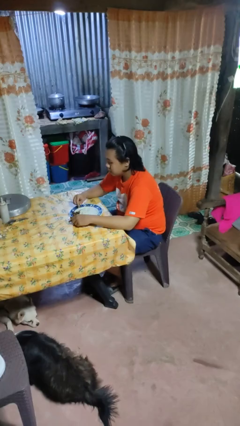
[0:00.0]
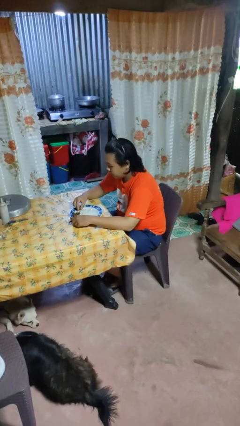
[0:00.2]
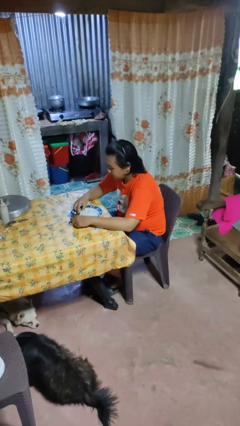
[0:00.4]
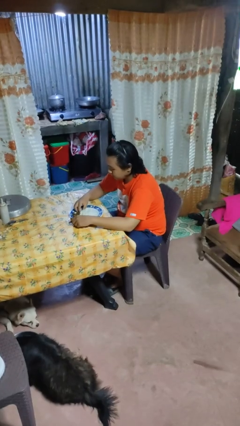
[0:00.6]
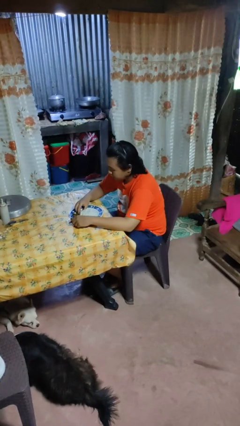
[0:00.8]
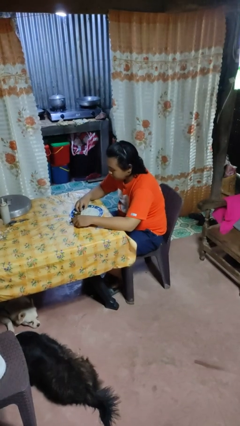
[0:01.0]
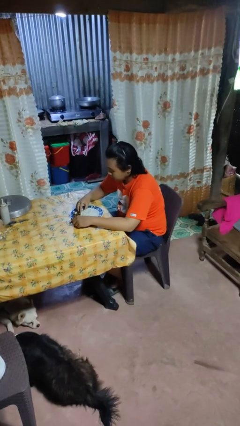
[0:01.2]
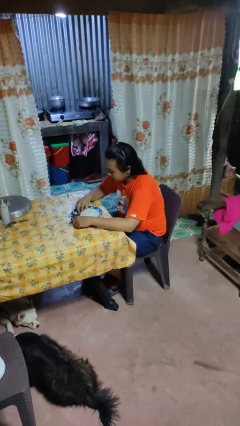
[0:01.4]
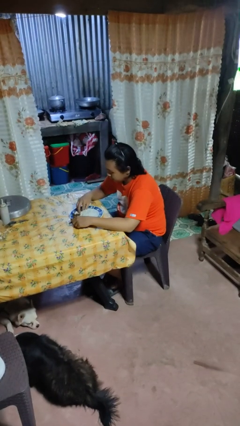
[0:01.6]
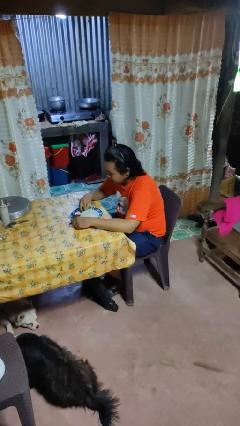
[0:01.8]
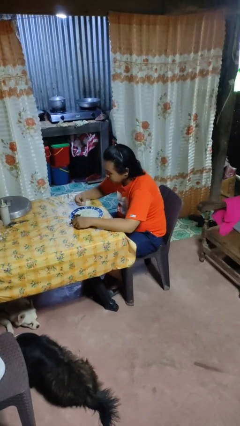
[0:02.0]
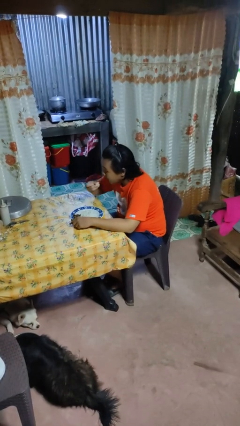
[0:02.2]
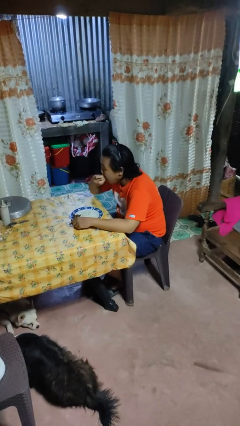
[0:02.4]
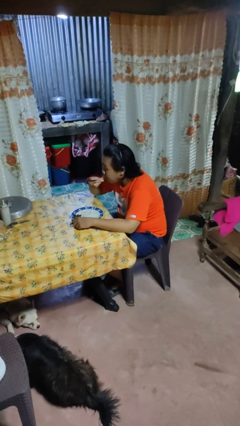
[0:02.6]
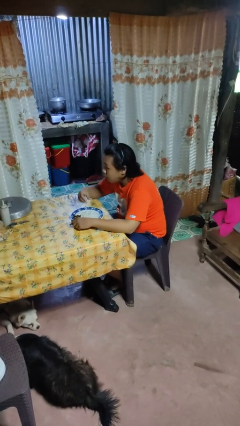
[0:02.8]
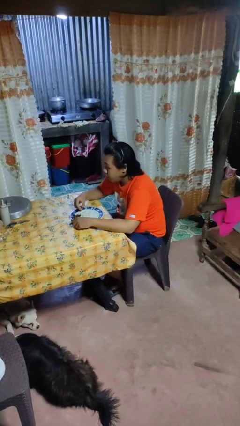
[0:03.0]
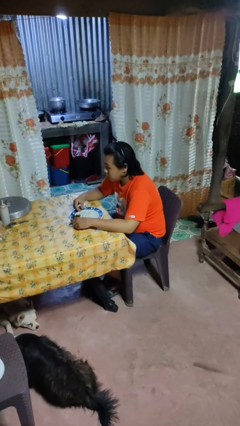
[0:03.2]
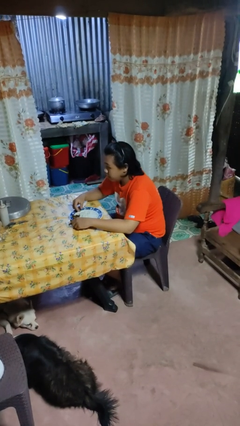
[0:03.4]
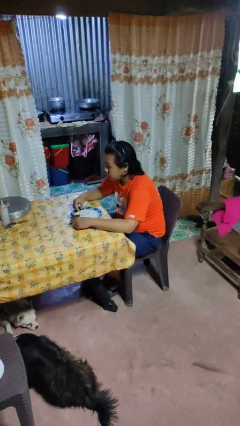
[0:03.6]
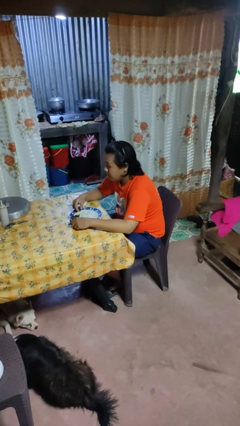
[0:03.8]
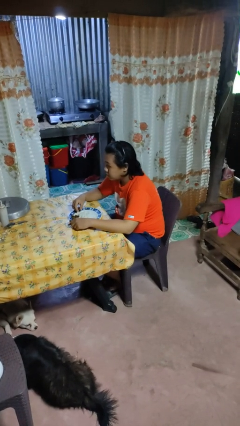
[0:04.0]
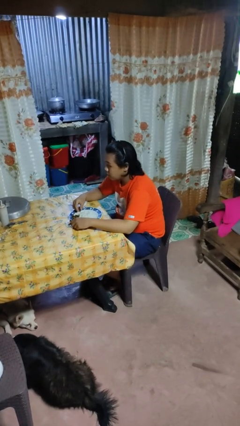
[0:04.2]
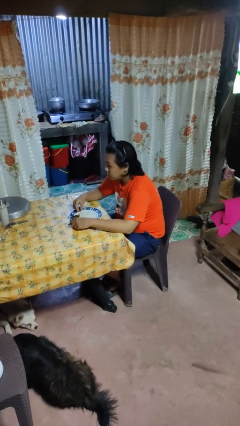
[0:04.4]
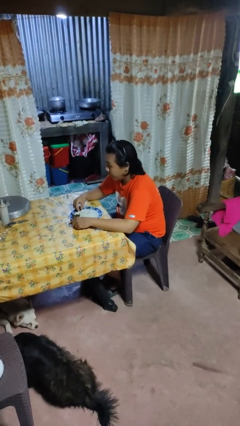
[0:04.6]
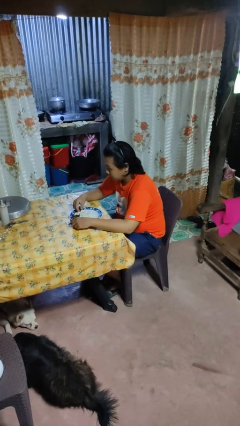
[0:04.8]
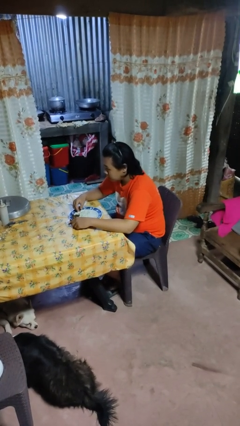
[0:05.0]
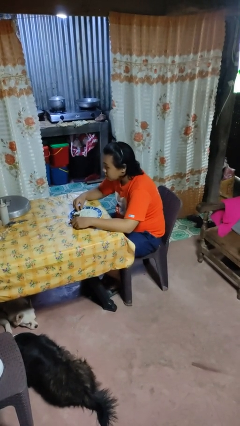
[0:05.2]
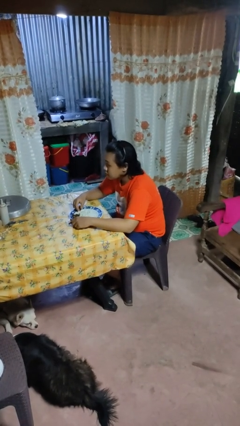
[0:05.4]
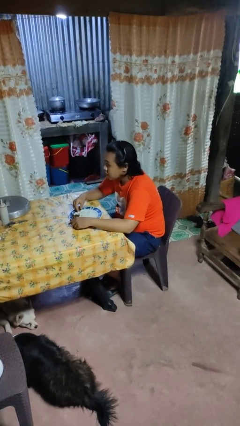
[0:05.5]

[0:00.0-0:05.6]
person eats with hands

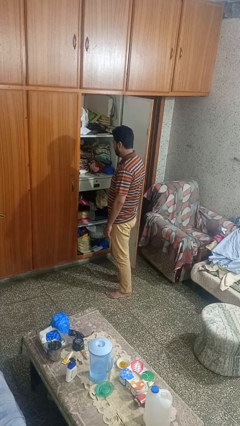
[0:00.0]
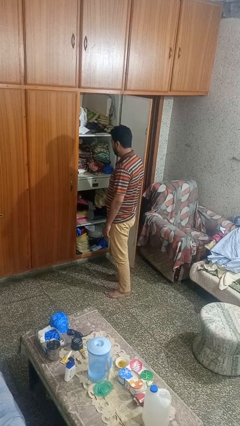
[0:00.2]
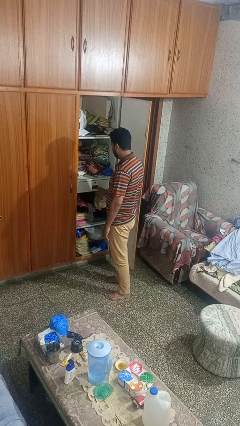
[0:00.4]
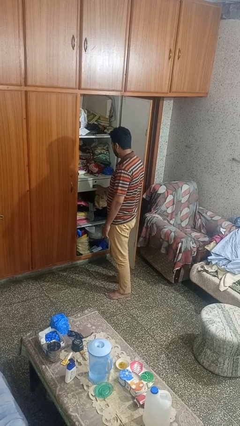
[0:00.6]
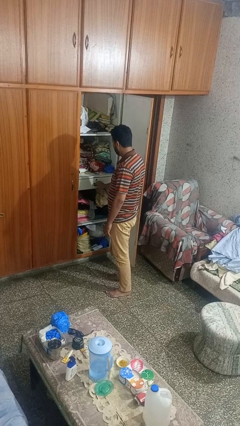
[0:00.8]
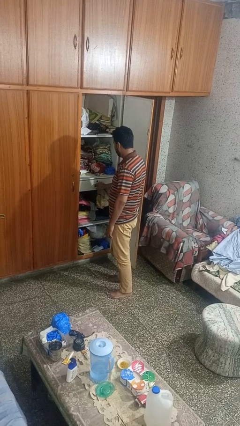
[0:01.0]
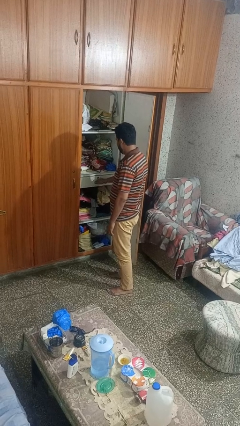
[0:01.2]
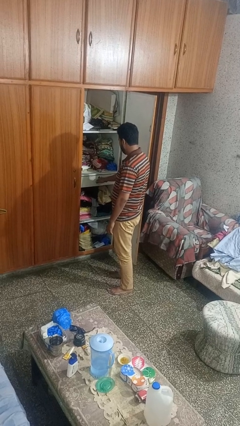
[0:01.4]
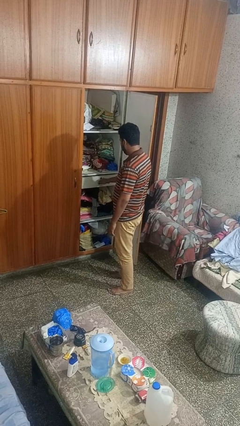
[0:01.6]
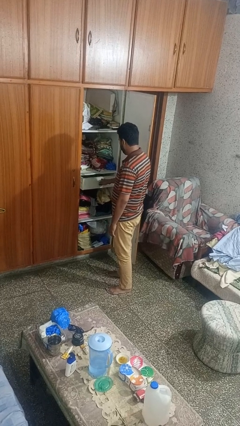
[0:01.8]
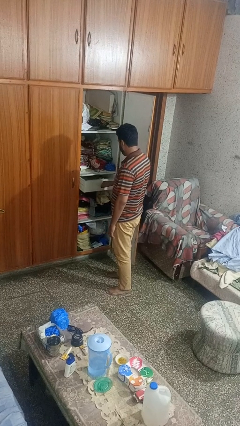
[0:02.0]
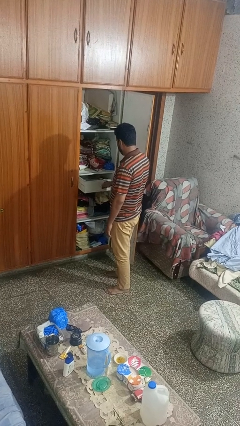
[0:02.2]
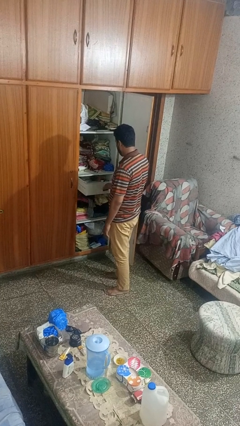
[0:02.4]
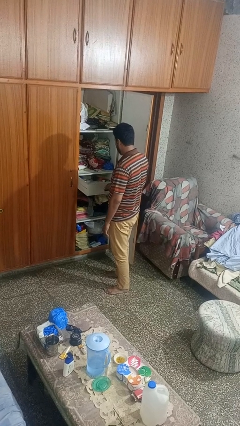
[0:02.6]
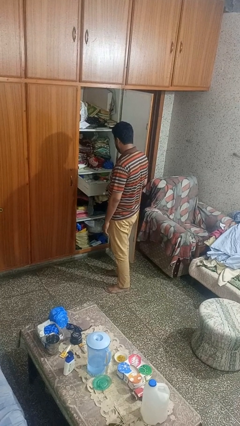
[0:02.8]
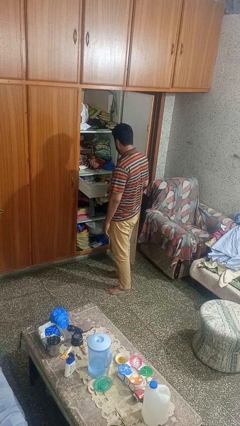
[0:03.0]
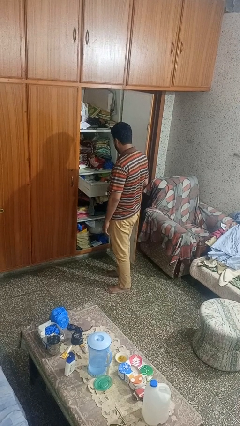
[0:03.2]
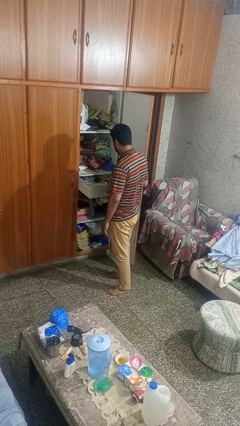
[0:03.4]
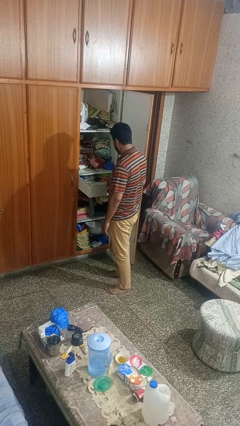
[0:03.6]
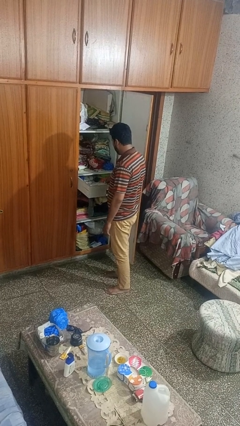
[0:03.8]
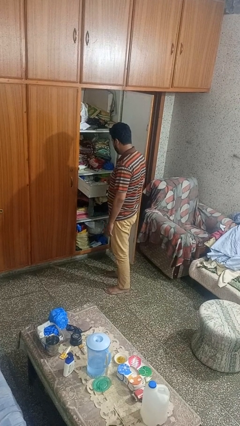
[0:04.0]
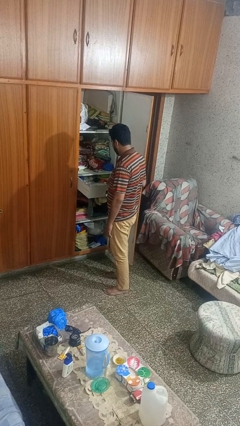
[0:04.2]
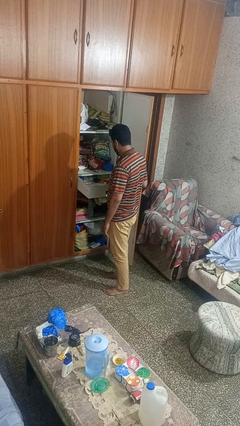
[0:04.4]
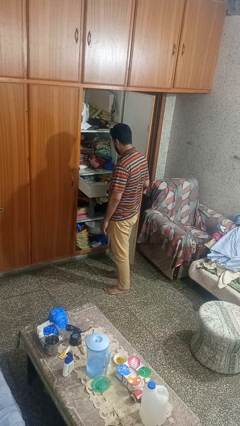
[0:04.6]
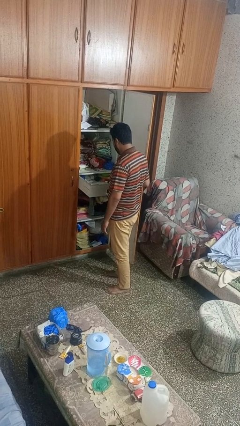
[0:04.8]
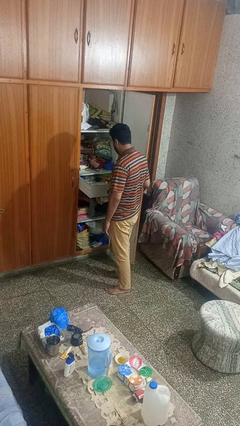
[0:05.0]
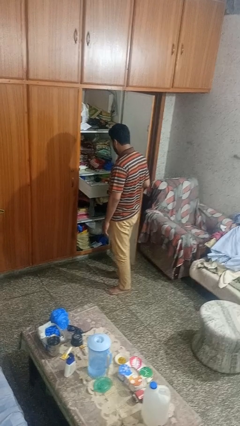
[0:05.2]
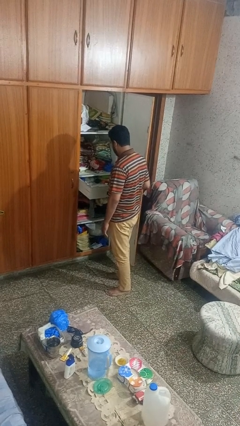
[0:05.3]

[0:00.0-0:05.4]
person opens dresser drawer

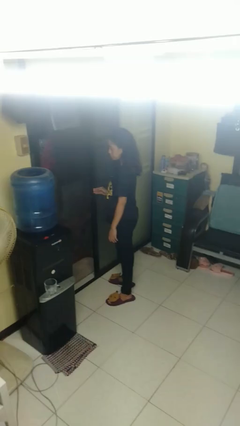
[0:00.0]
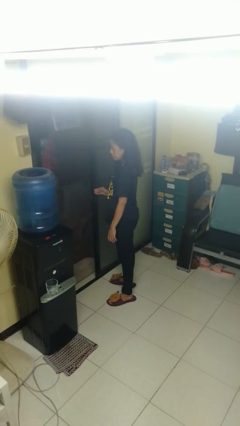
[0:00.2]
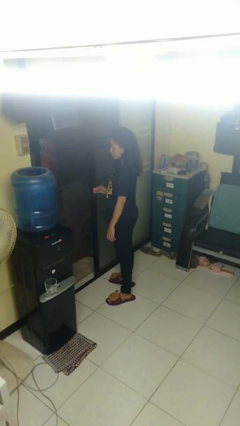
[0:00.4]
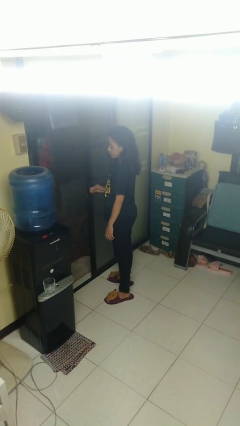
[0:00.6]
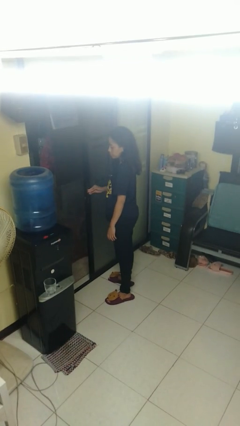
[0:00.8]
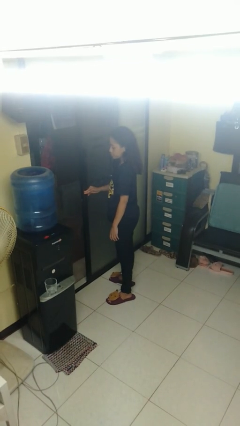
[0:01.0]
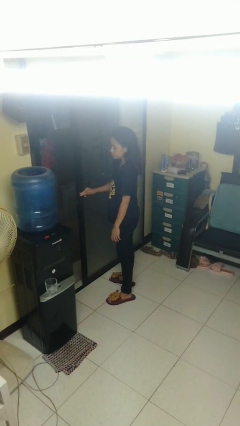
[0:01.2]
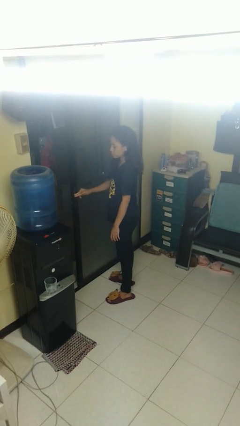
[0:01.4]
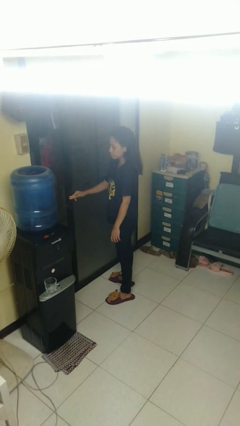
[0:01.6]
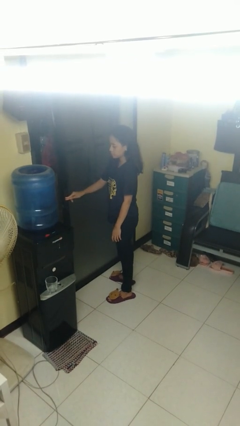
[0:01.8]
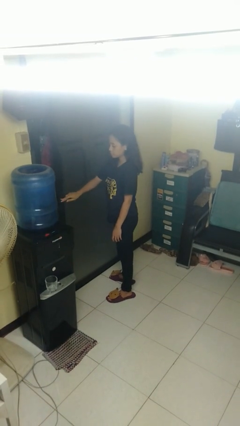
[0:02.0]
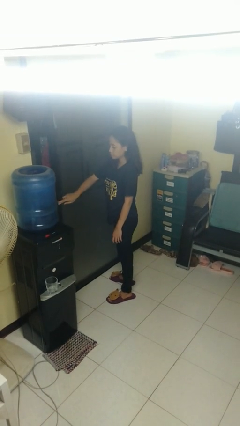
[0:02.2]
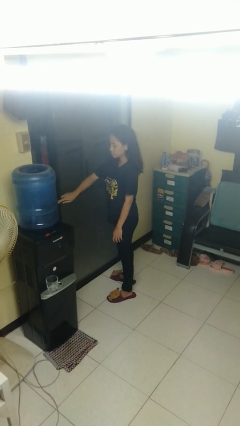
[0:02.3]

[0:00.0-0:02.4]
person closes sliding door

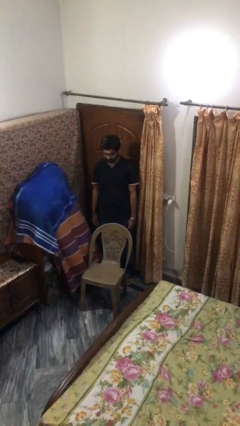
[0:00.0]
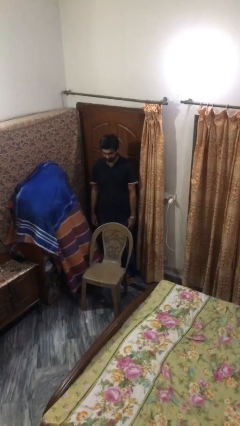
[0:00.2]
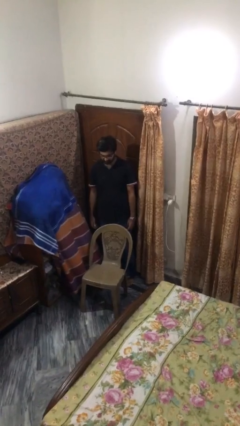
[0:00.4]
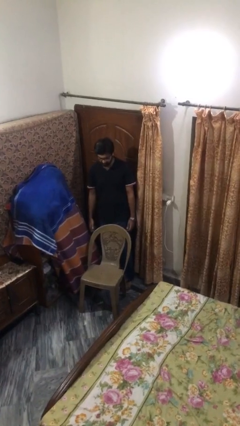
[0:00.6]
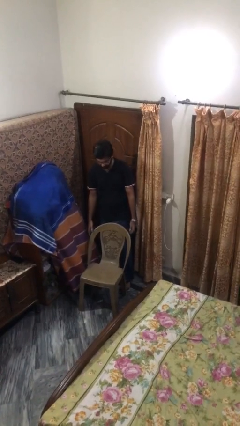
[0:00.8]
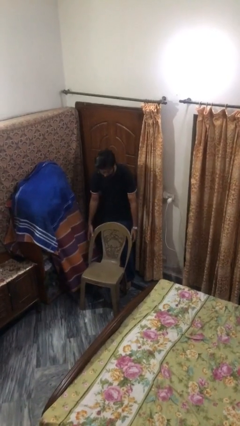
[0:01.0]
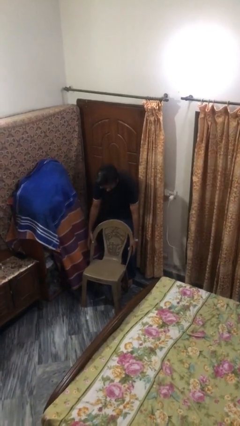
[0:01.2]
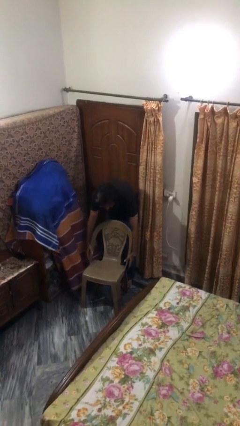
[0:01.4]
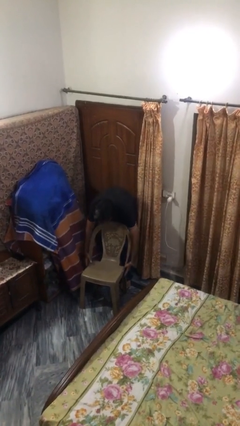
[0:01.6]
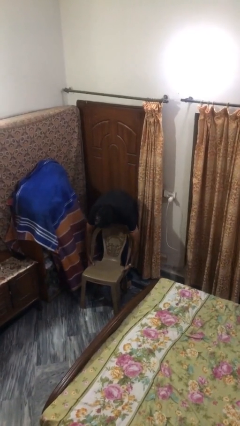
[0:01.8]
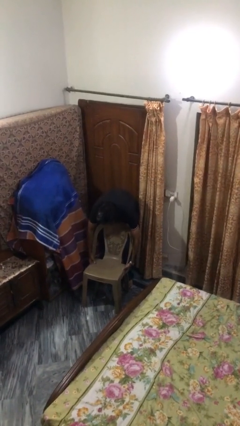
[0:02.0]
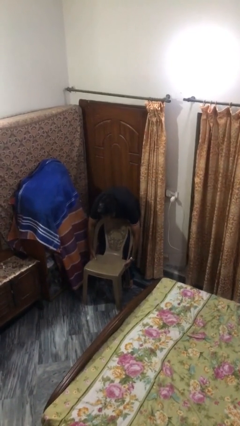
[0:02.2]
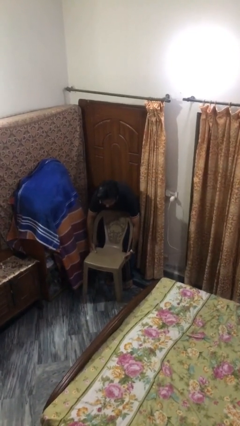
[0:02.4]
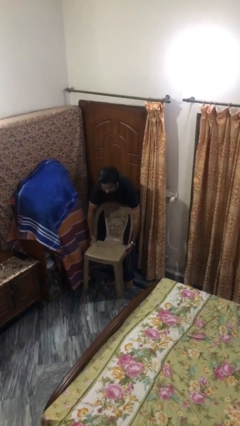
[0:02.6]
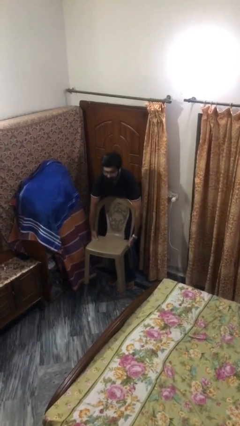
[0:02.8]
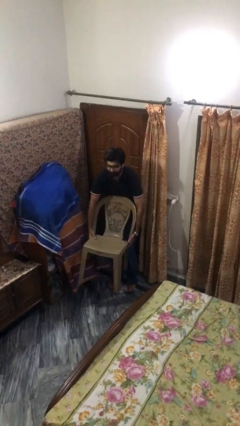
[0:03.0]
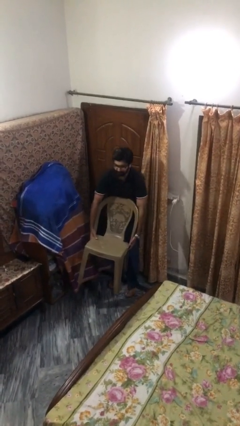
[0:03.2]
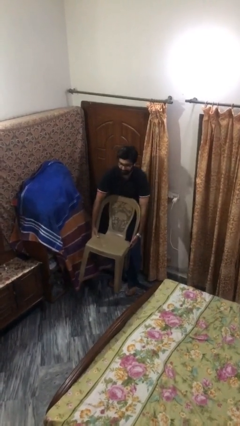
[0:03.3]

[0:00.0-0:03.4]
person picks up object from floor

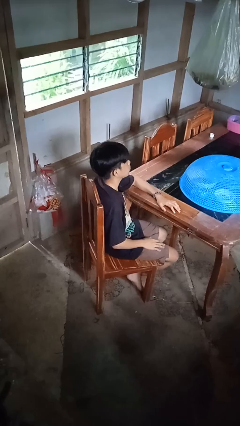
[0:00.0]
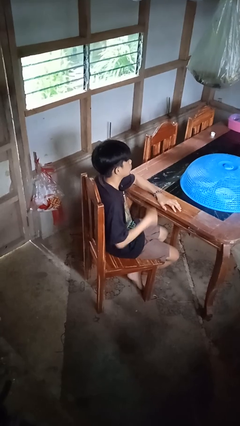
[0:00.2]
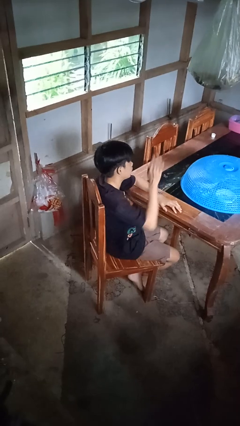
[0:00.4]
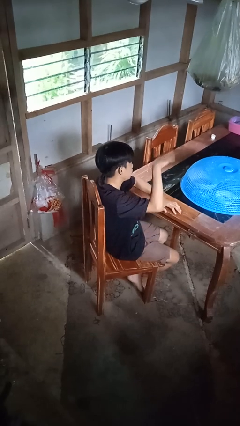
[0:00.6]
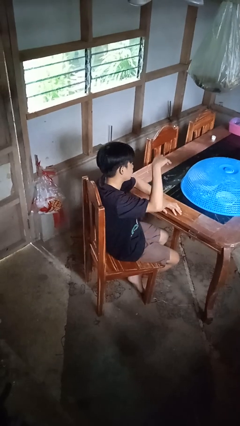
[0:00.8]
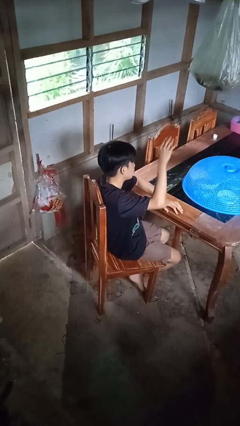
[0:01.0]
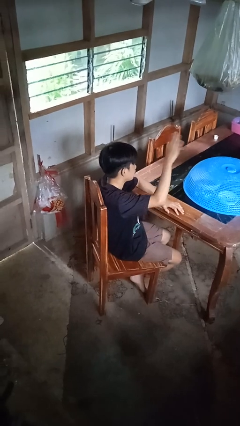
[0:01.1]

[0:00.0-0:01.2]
person gestures come here
